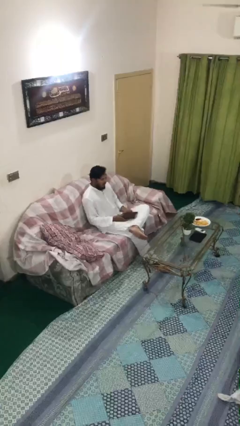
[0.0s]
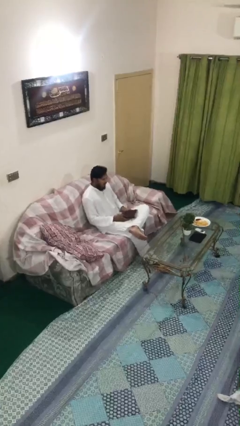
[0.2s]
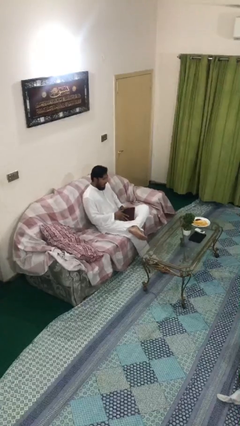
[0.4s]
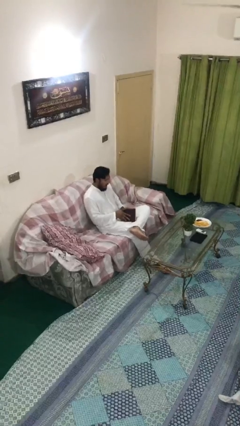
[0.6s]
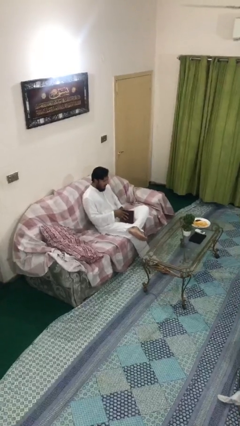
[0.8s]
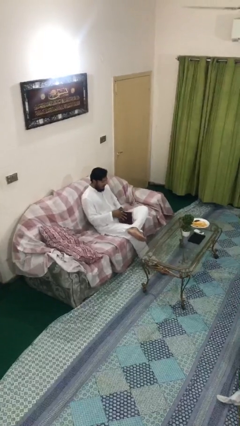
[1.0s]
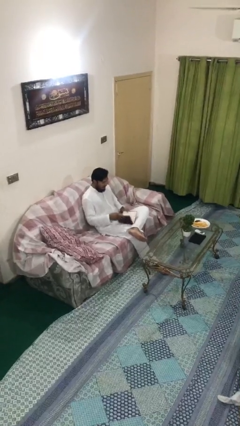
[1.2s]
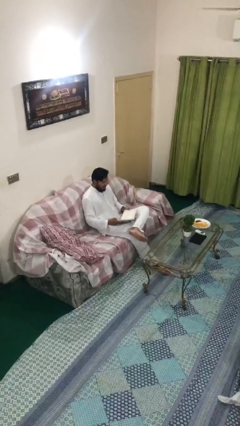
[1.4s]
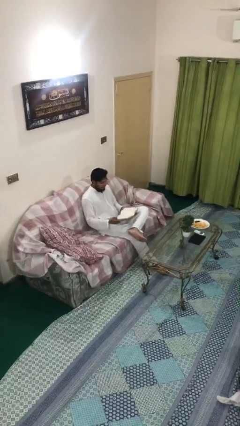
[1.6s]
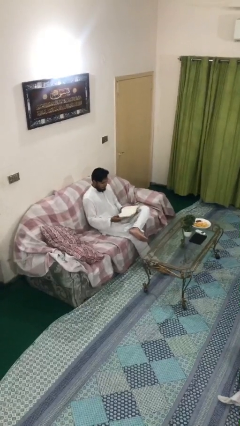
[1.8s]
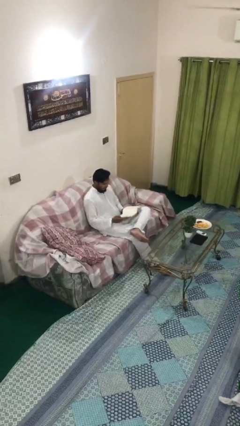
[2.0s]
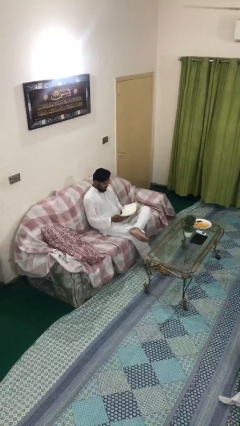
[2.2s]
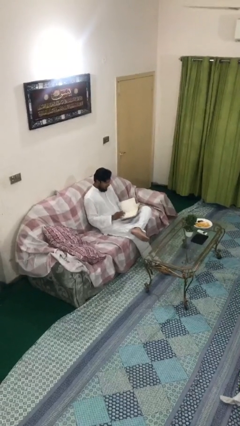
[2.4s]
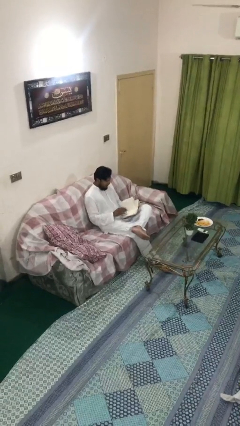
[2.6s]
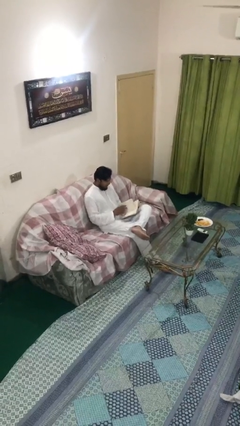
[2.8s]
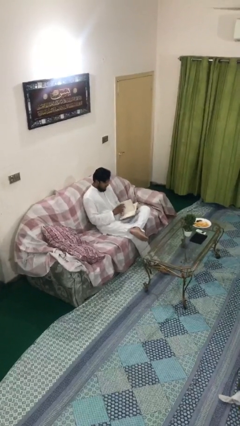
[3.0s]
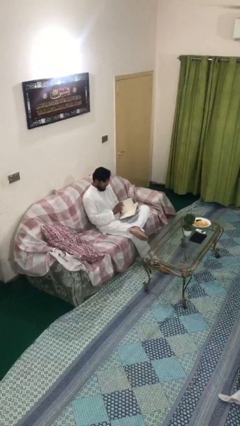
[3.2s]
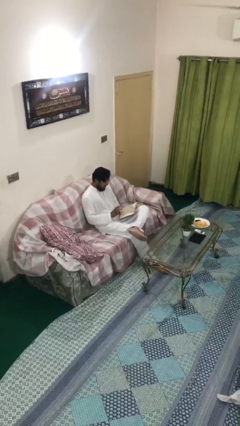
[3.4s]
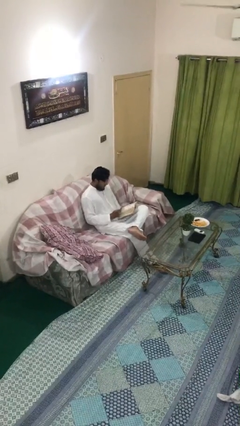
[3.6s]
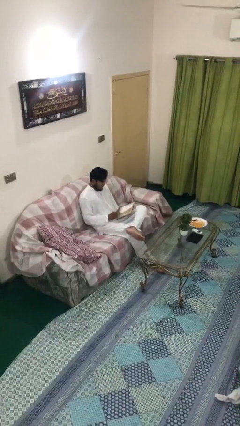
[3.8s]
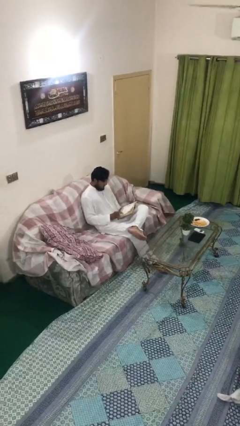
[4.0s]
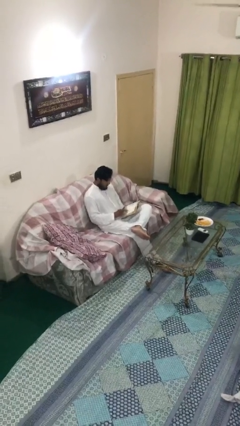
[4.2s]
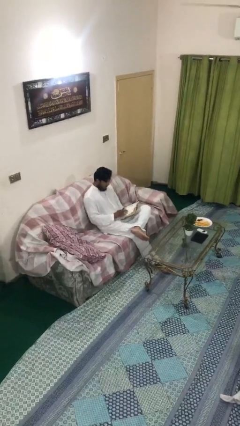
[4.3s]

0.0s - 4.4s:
person reads document

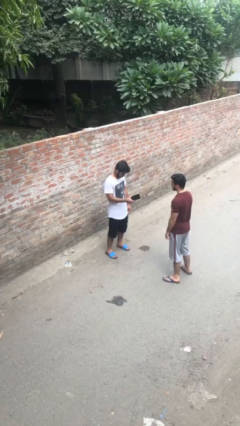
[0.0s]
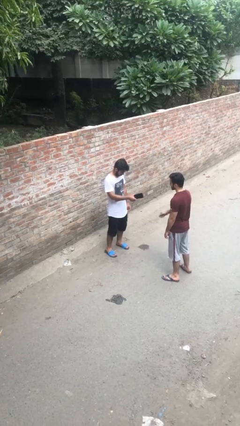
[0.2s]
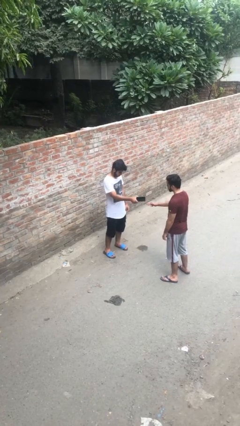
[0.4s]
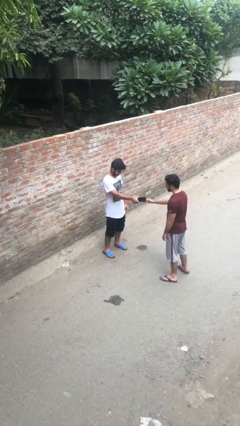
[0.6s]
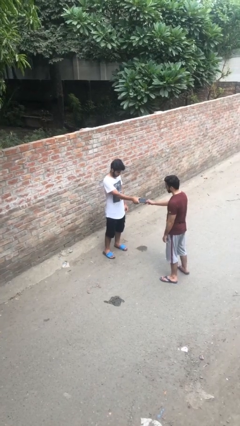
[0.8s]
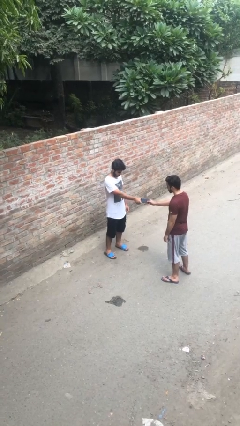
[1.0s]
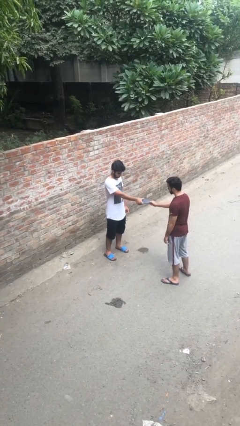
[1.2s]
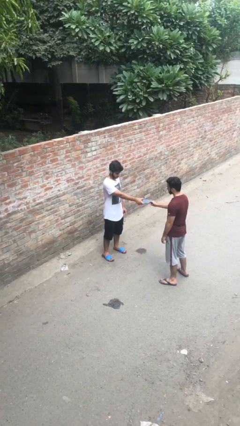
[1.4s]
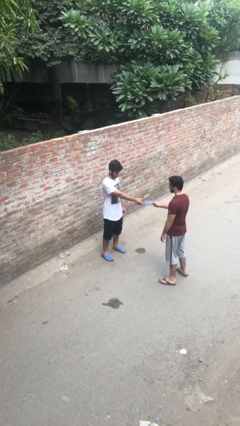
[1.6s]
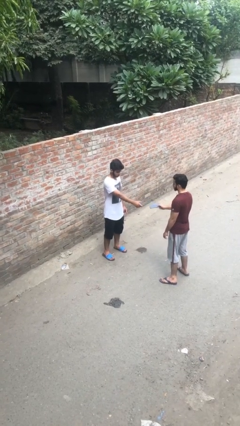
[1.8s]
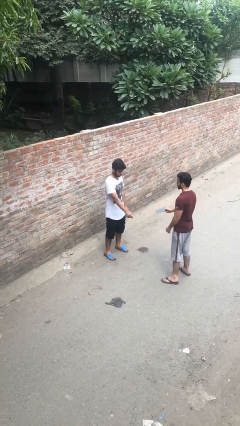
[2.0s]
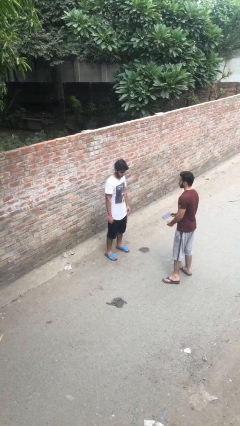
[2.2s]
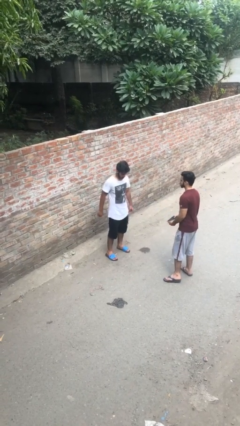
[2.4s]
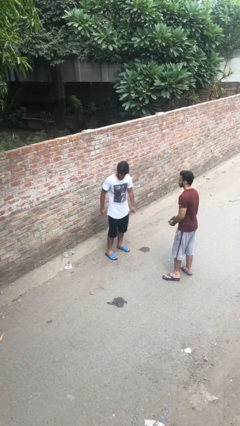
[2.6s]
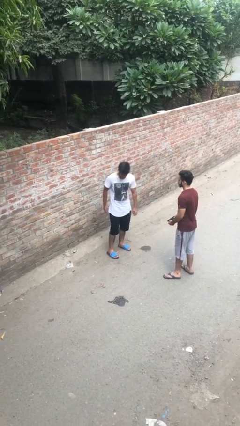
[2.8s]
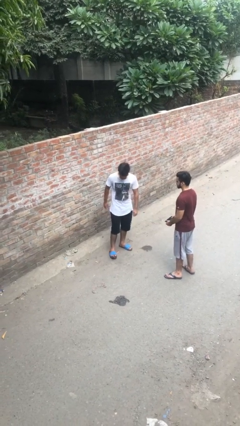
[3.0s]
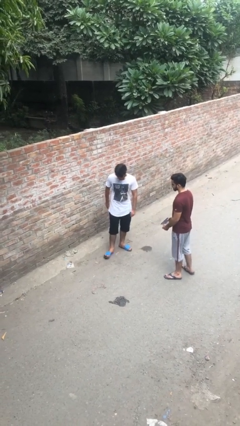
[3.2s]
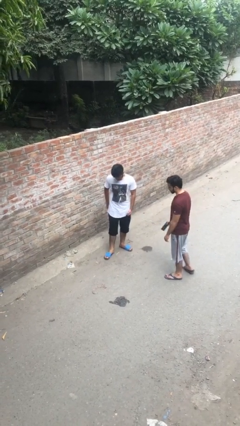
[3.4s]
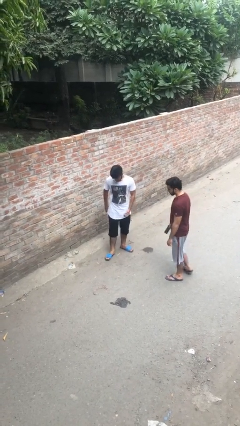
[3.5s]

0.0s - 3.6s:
person transfers object to person

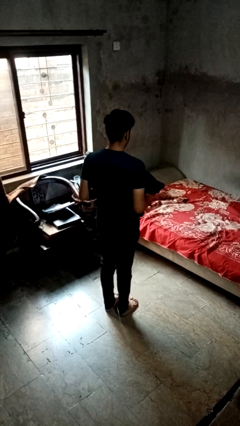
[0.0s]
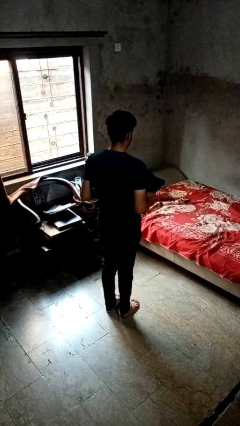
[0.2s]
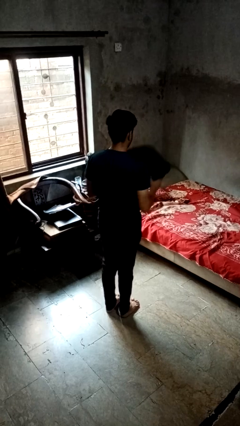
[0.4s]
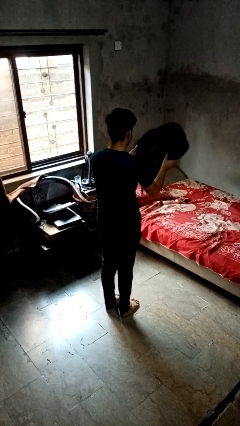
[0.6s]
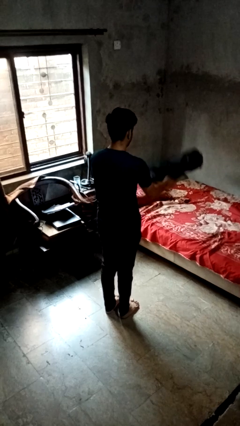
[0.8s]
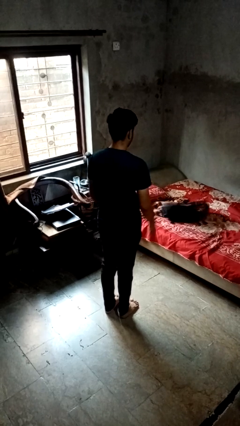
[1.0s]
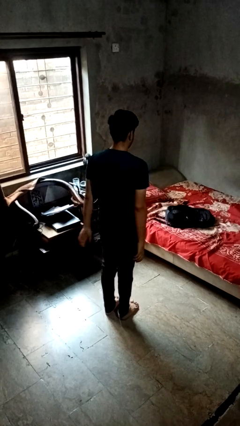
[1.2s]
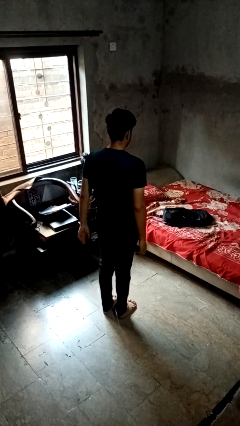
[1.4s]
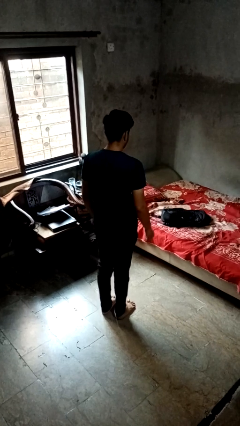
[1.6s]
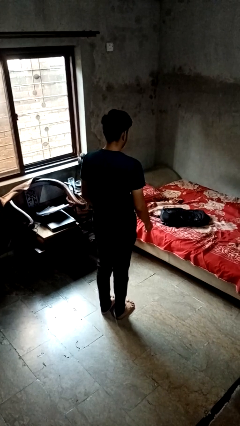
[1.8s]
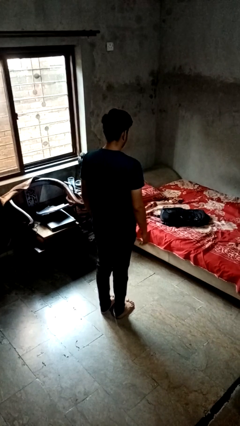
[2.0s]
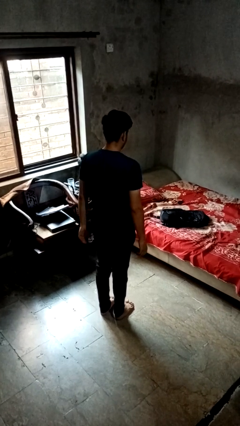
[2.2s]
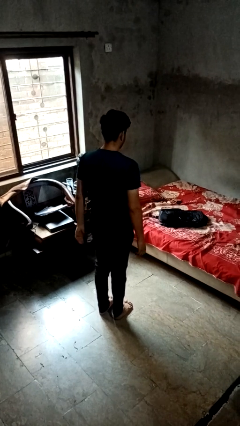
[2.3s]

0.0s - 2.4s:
person throws object on bed

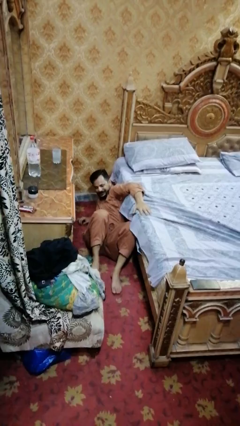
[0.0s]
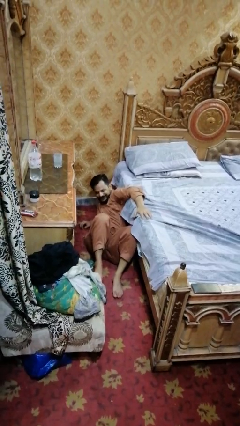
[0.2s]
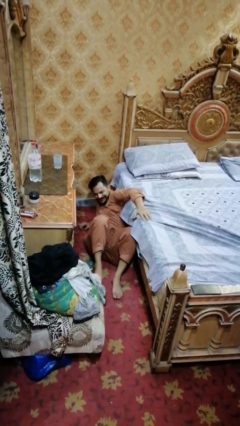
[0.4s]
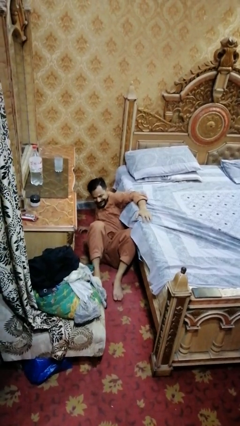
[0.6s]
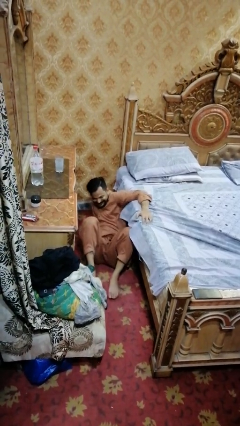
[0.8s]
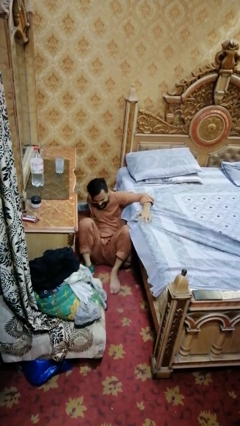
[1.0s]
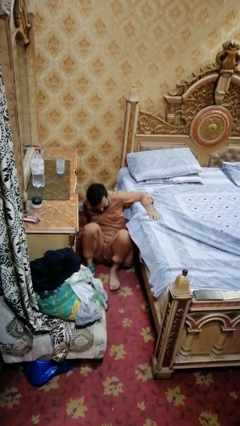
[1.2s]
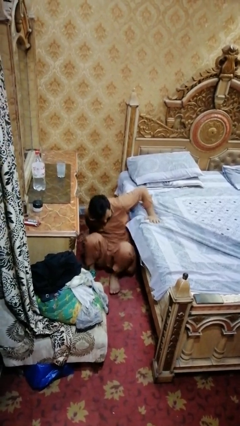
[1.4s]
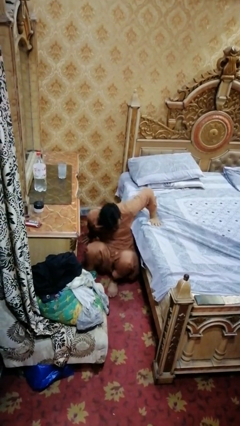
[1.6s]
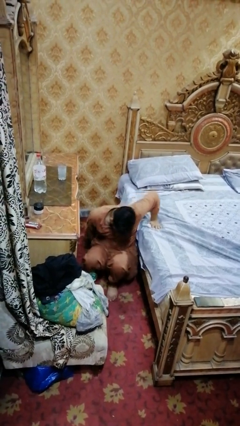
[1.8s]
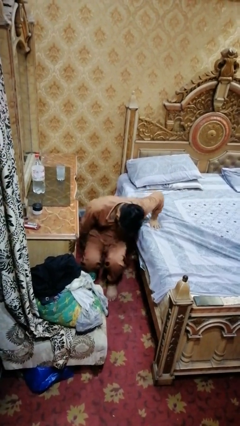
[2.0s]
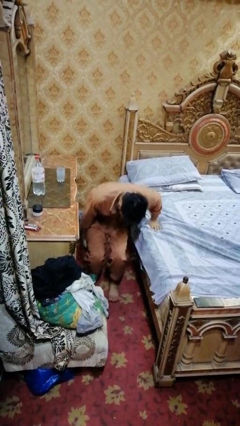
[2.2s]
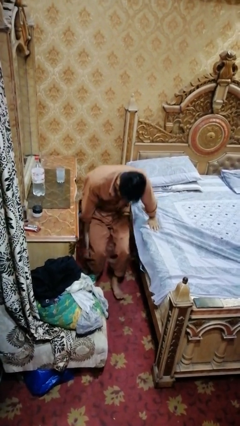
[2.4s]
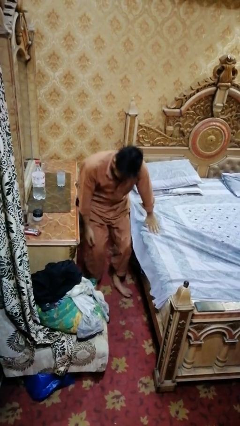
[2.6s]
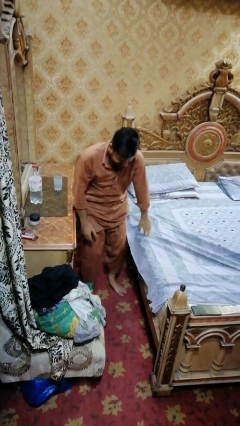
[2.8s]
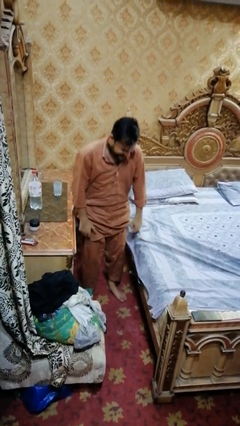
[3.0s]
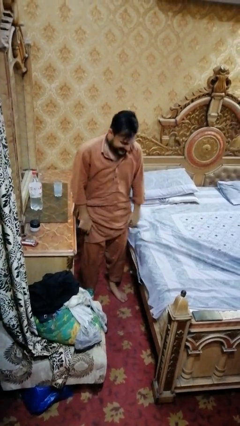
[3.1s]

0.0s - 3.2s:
person stands up from floor

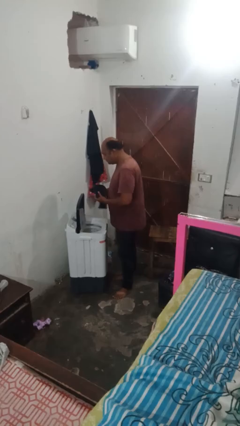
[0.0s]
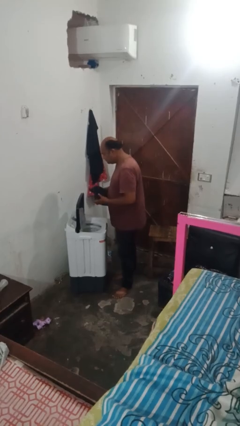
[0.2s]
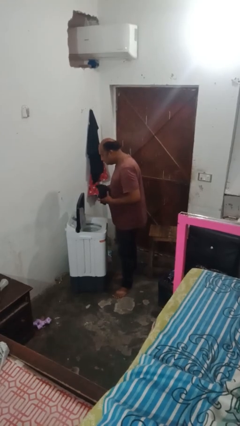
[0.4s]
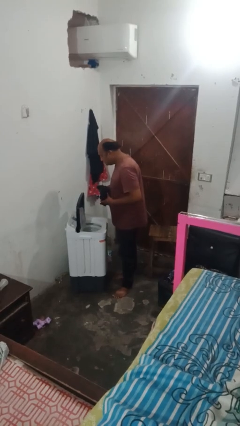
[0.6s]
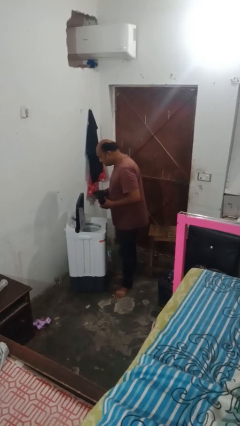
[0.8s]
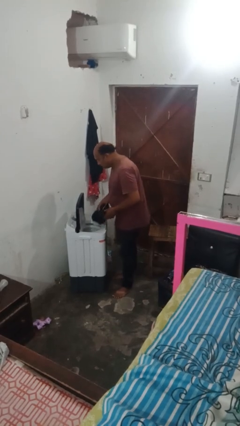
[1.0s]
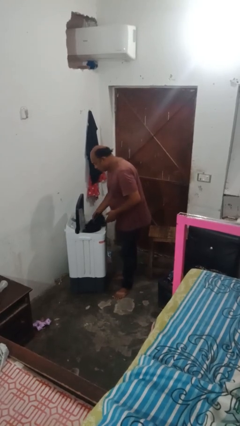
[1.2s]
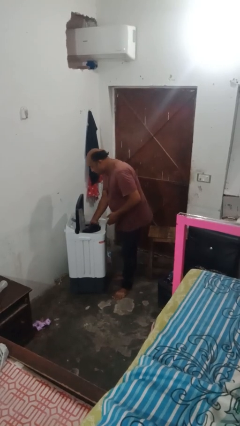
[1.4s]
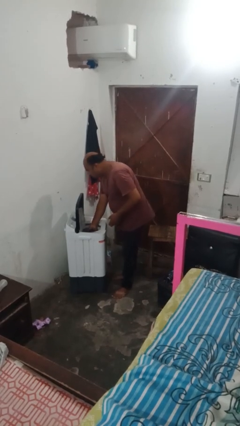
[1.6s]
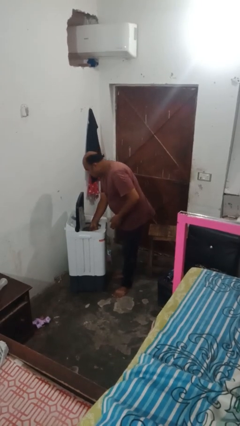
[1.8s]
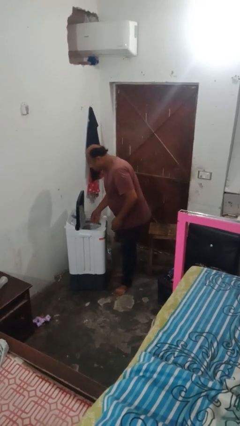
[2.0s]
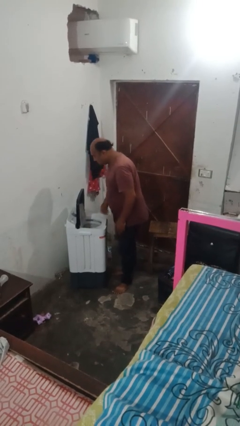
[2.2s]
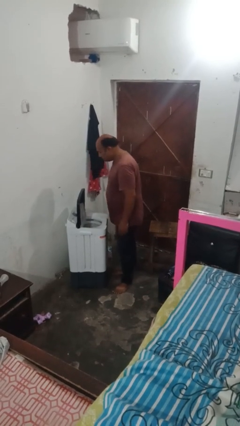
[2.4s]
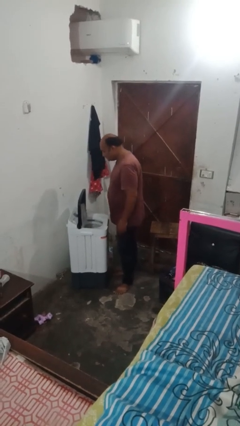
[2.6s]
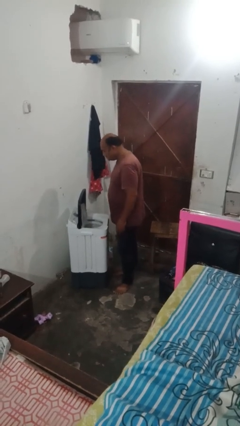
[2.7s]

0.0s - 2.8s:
person loads clotheswasher

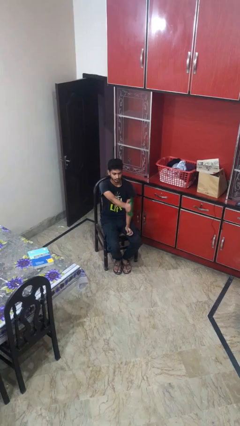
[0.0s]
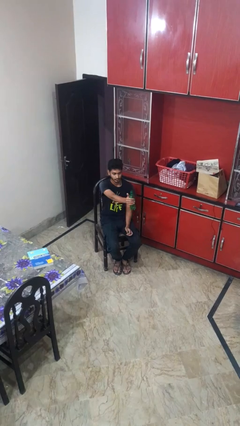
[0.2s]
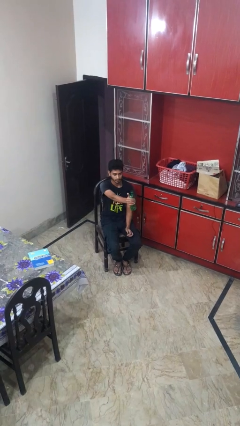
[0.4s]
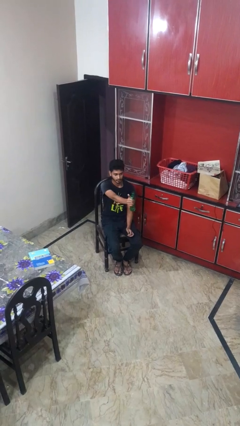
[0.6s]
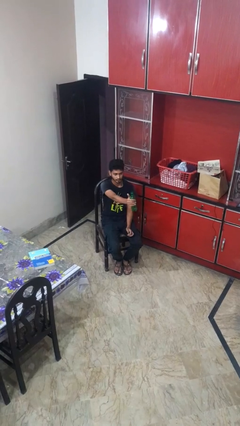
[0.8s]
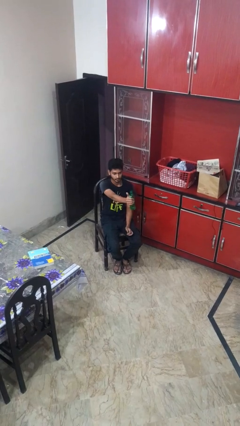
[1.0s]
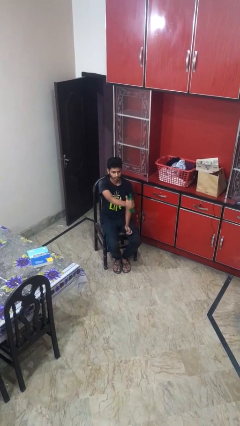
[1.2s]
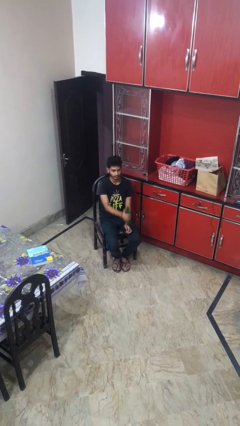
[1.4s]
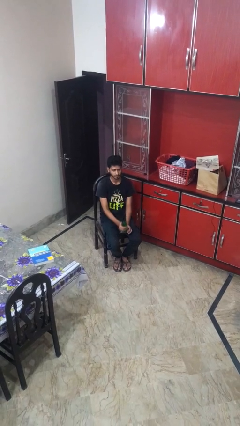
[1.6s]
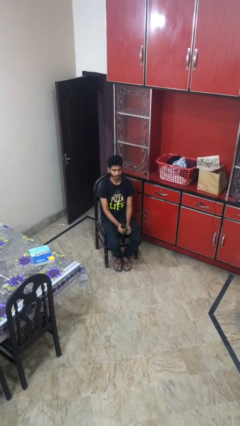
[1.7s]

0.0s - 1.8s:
person squeezes object
